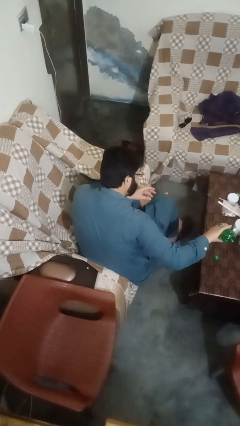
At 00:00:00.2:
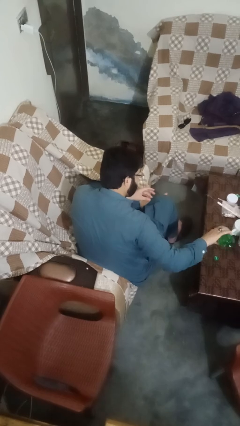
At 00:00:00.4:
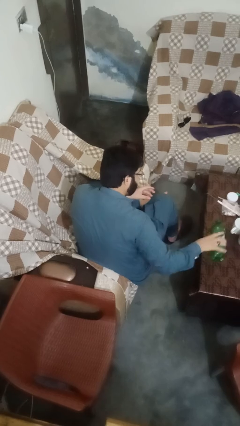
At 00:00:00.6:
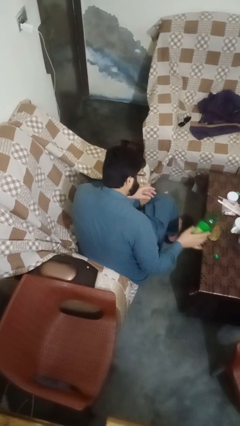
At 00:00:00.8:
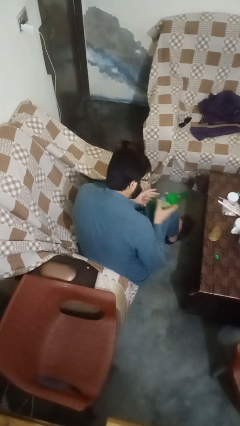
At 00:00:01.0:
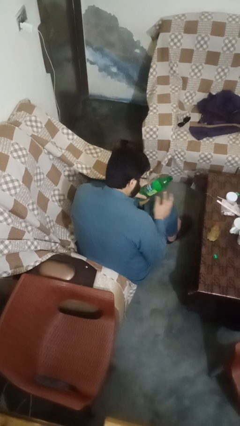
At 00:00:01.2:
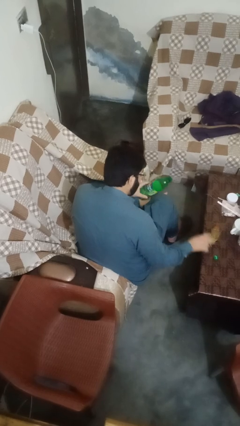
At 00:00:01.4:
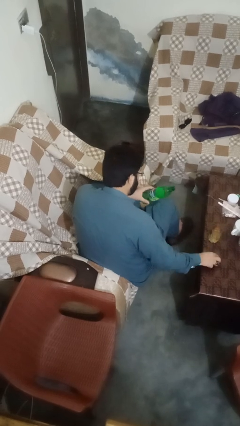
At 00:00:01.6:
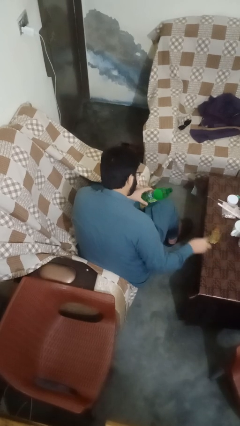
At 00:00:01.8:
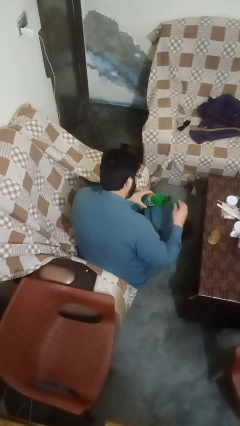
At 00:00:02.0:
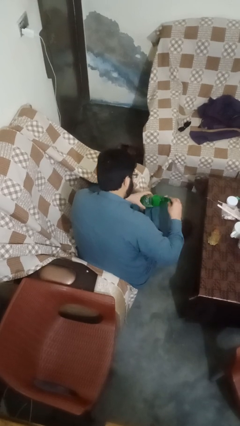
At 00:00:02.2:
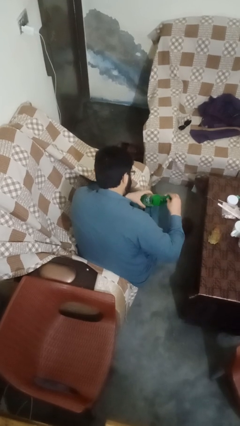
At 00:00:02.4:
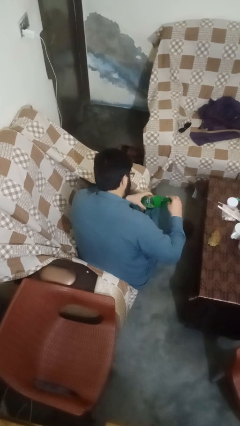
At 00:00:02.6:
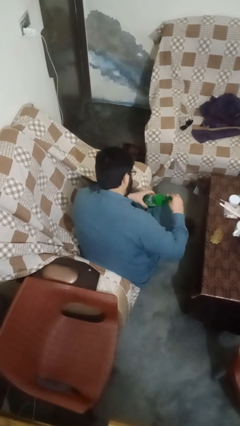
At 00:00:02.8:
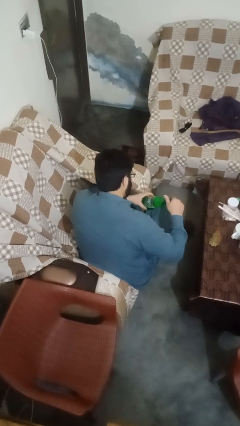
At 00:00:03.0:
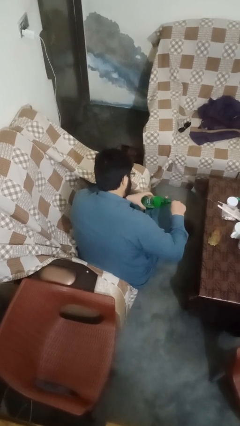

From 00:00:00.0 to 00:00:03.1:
person screws lid to bottle

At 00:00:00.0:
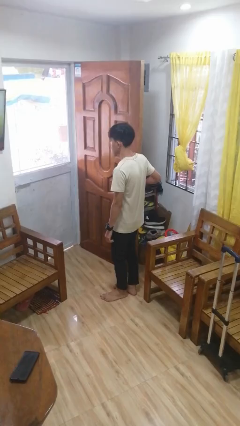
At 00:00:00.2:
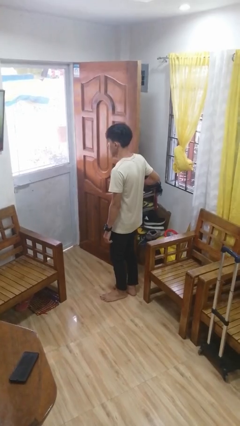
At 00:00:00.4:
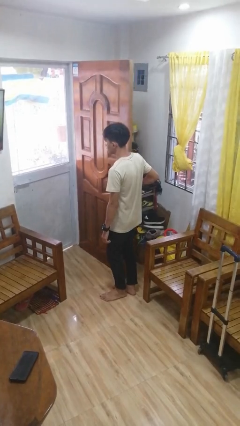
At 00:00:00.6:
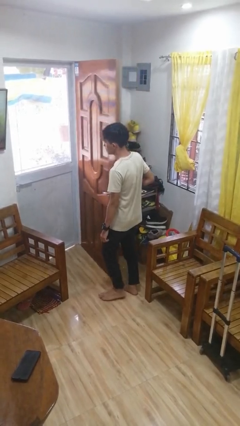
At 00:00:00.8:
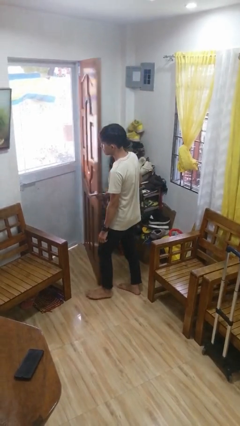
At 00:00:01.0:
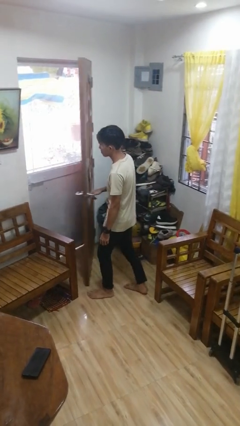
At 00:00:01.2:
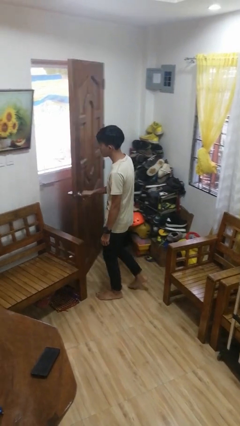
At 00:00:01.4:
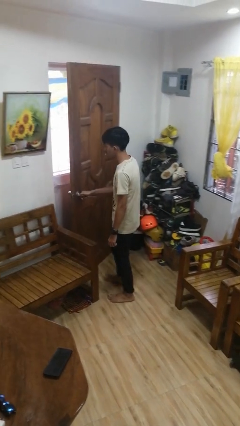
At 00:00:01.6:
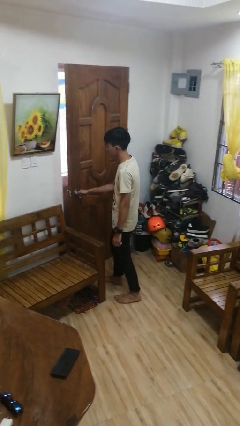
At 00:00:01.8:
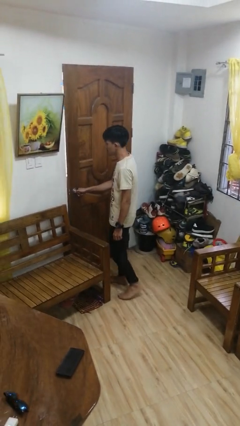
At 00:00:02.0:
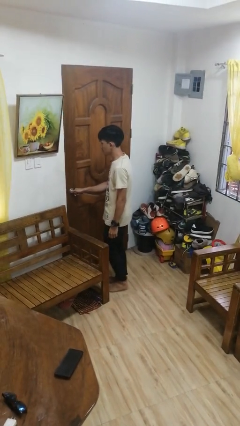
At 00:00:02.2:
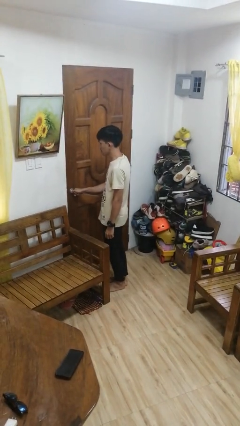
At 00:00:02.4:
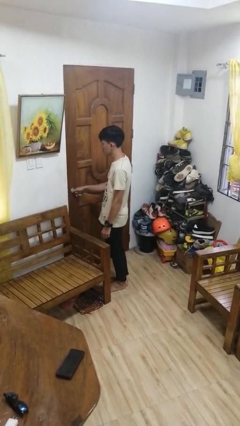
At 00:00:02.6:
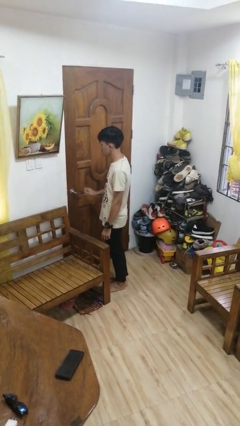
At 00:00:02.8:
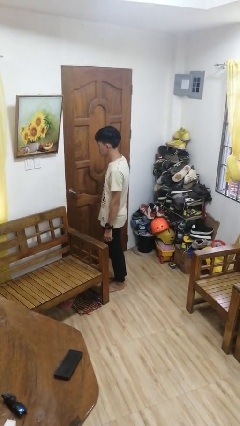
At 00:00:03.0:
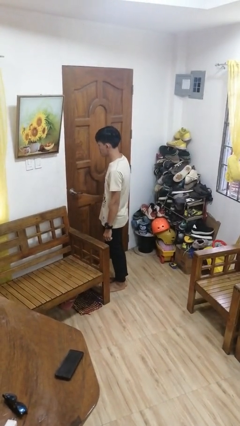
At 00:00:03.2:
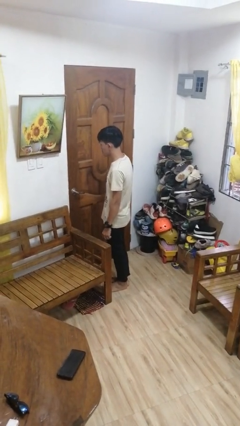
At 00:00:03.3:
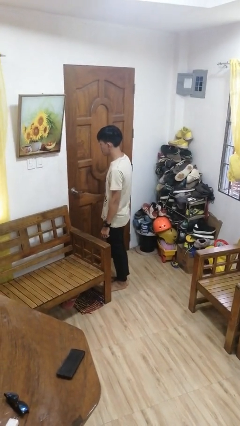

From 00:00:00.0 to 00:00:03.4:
person closes facility door

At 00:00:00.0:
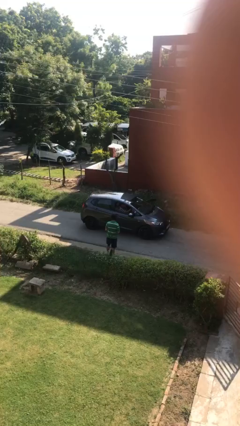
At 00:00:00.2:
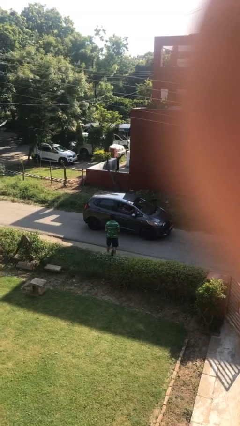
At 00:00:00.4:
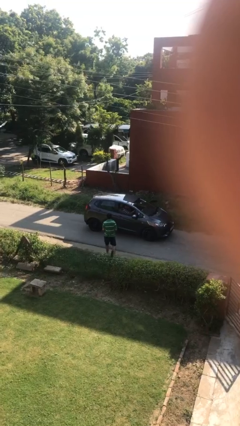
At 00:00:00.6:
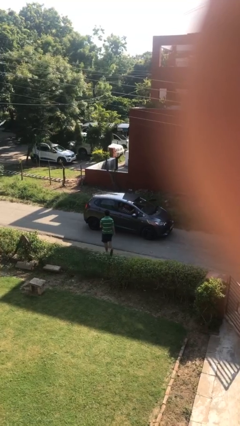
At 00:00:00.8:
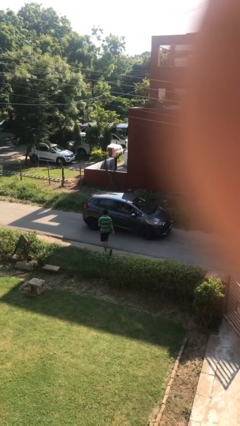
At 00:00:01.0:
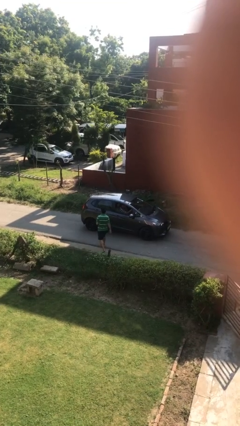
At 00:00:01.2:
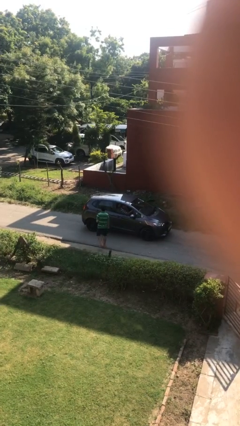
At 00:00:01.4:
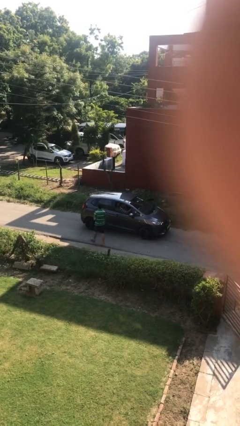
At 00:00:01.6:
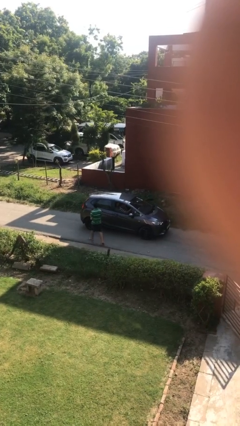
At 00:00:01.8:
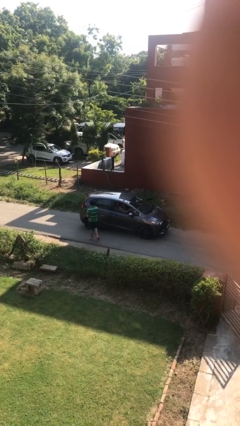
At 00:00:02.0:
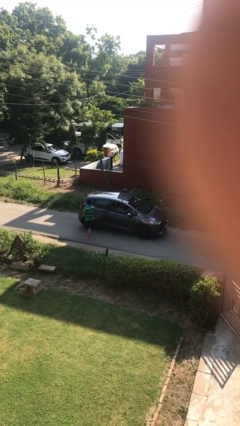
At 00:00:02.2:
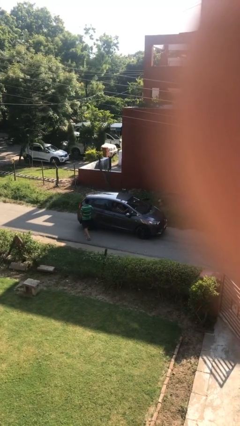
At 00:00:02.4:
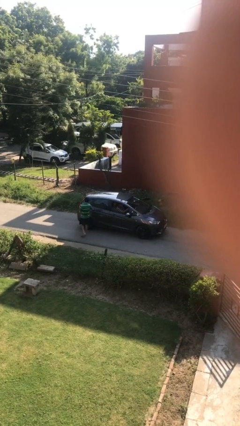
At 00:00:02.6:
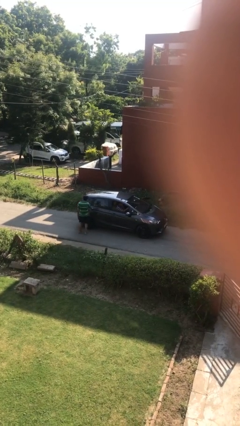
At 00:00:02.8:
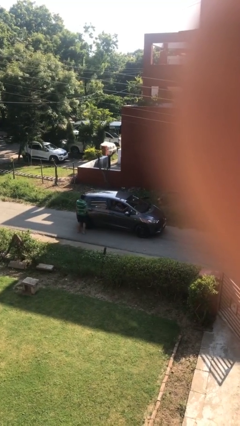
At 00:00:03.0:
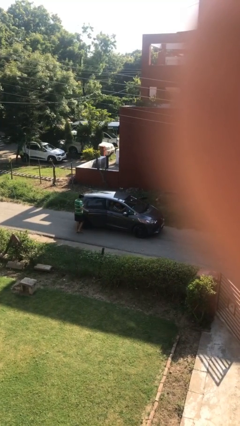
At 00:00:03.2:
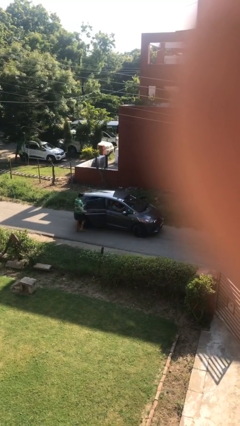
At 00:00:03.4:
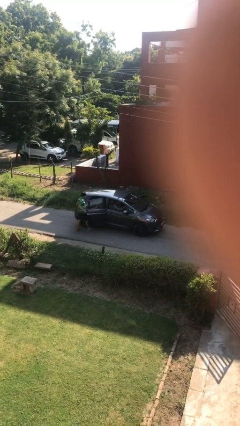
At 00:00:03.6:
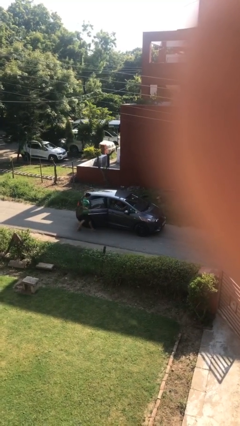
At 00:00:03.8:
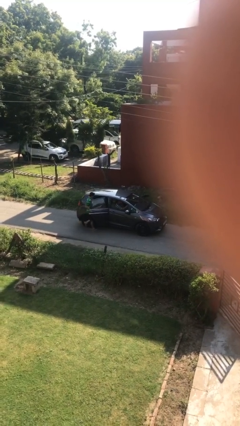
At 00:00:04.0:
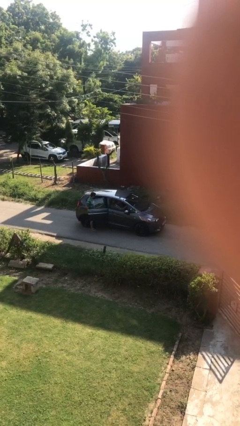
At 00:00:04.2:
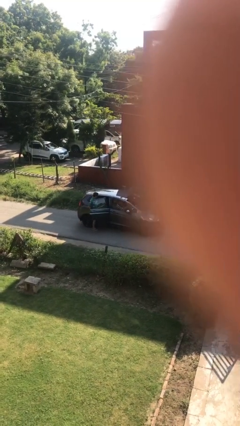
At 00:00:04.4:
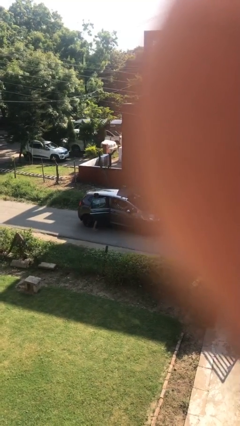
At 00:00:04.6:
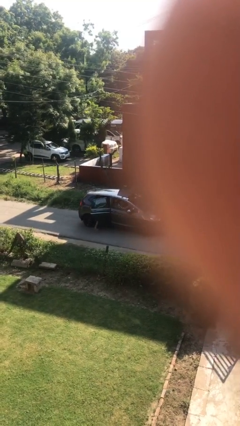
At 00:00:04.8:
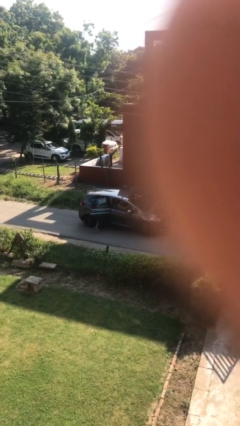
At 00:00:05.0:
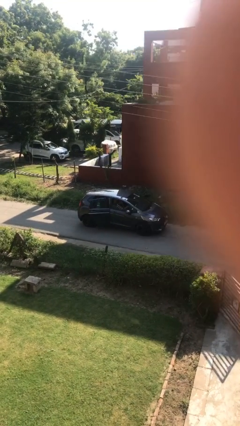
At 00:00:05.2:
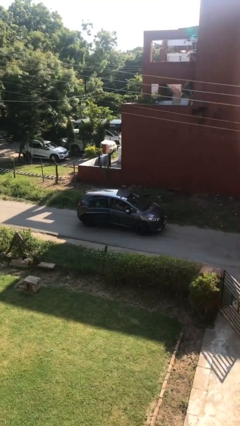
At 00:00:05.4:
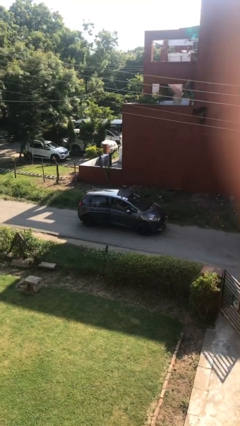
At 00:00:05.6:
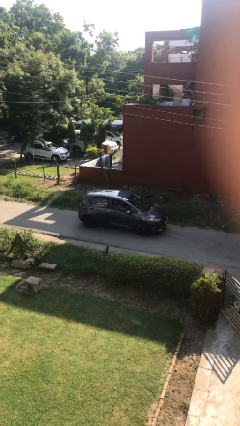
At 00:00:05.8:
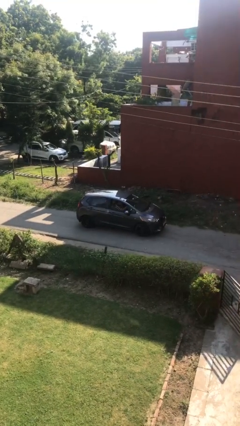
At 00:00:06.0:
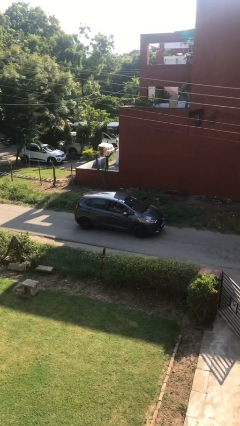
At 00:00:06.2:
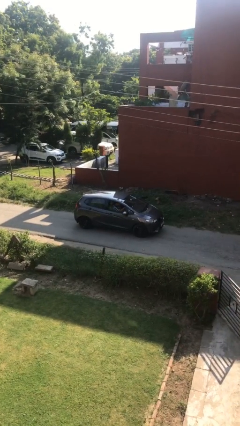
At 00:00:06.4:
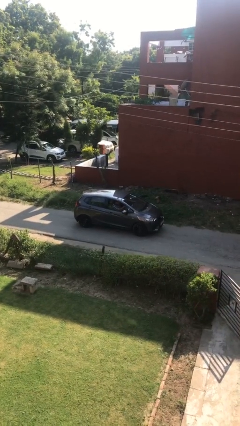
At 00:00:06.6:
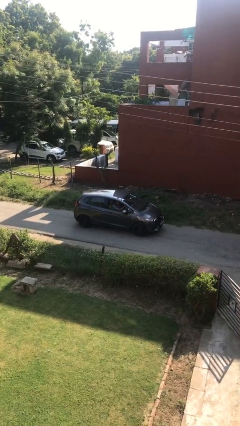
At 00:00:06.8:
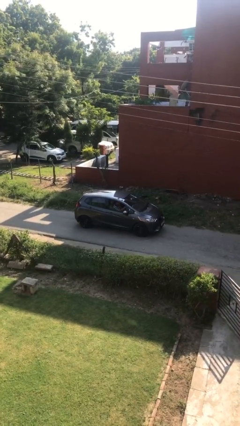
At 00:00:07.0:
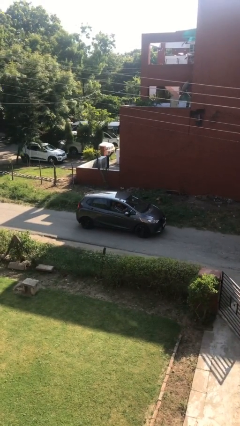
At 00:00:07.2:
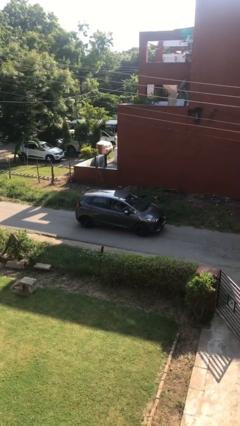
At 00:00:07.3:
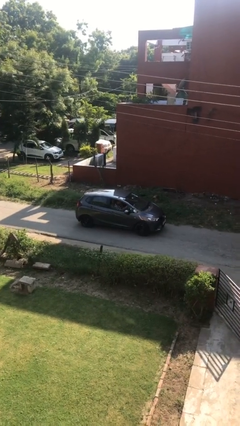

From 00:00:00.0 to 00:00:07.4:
car picks up person

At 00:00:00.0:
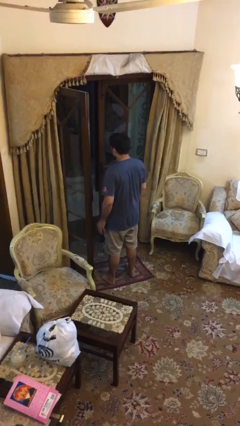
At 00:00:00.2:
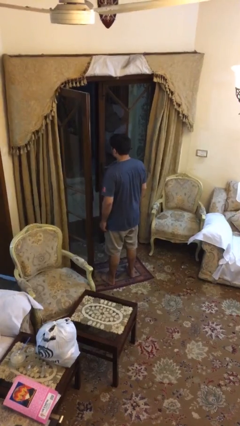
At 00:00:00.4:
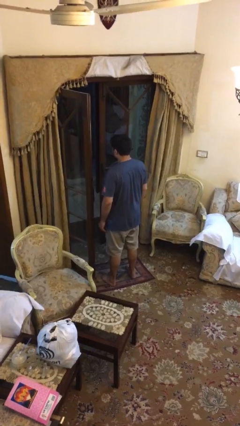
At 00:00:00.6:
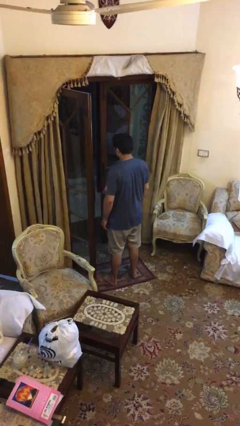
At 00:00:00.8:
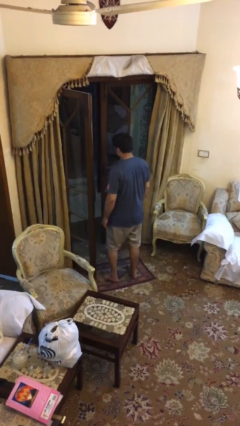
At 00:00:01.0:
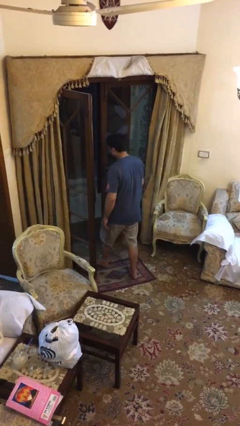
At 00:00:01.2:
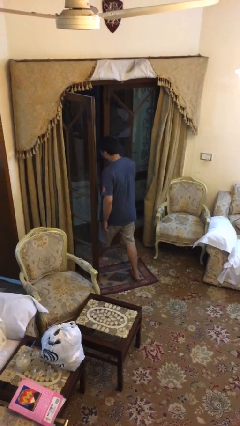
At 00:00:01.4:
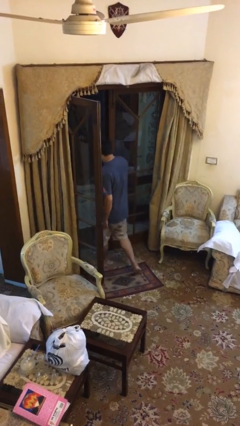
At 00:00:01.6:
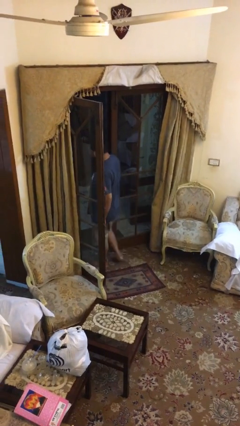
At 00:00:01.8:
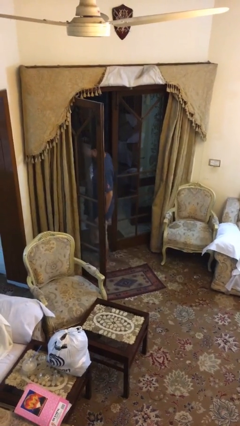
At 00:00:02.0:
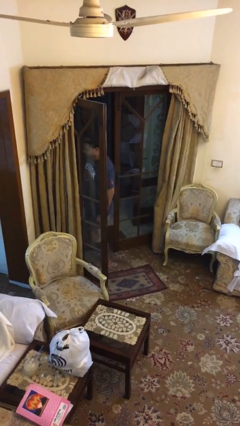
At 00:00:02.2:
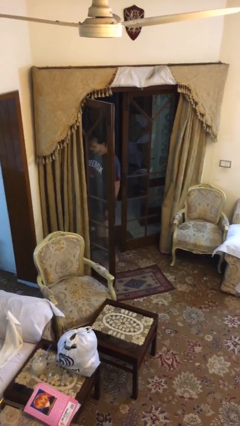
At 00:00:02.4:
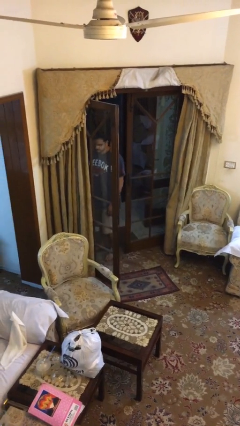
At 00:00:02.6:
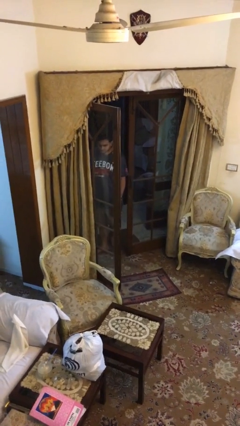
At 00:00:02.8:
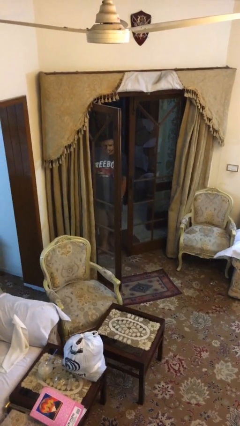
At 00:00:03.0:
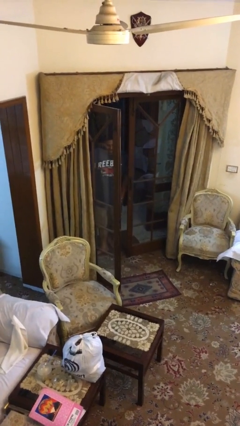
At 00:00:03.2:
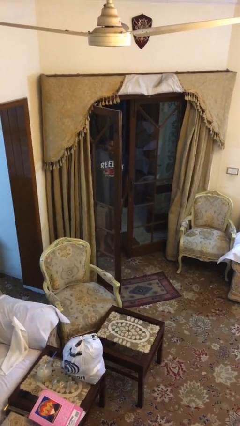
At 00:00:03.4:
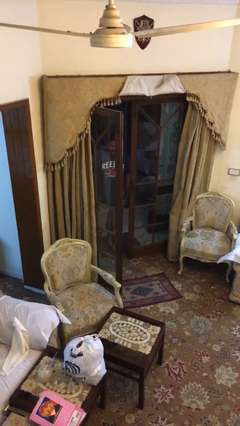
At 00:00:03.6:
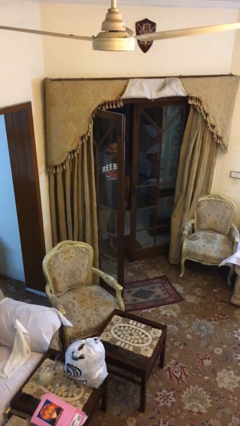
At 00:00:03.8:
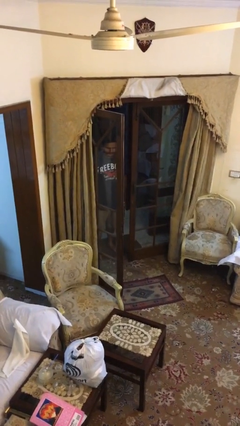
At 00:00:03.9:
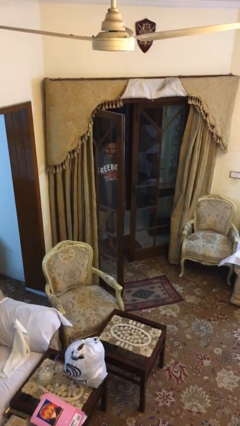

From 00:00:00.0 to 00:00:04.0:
person exits scene through structure
